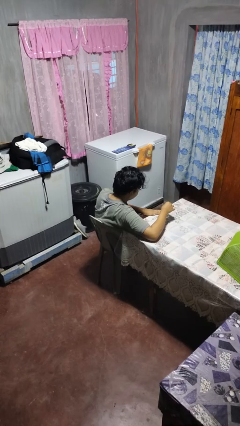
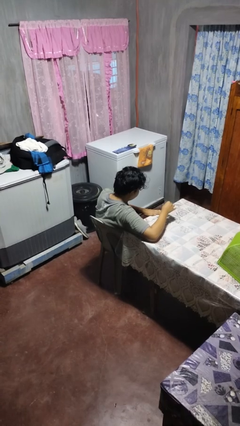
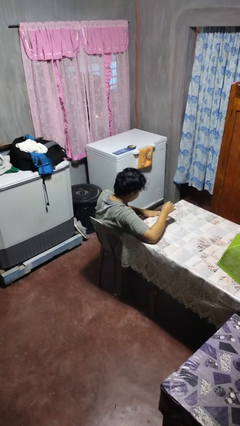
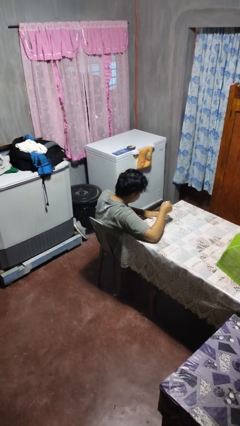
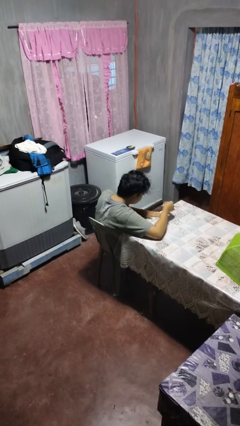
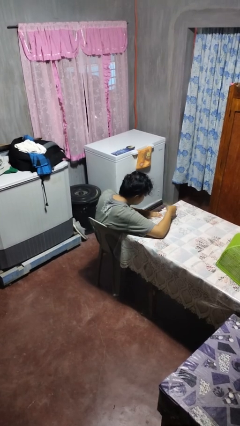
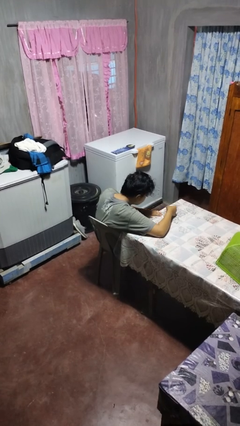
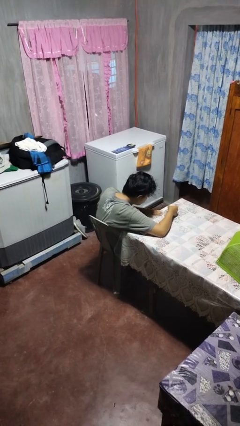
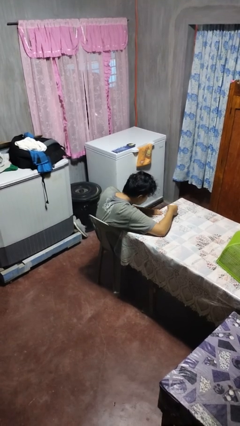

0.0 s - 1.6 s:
person paints fingernails

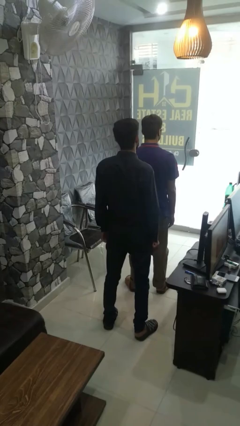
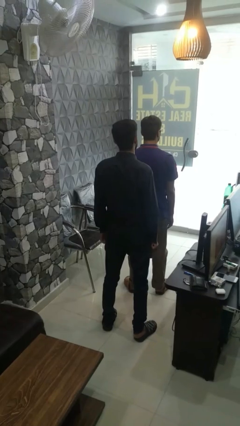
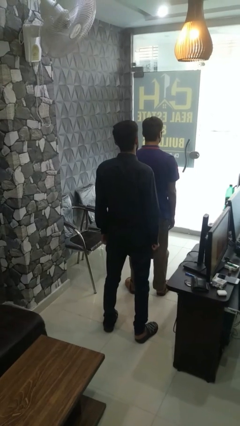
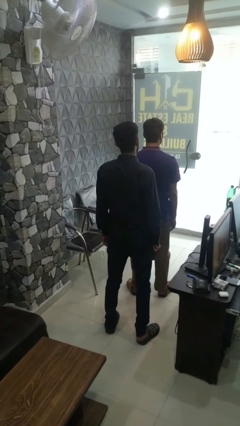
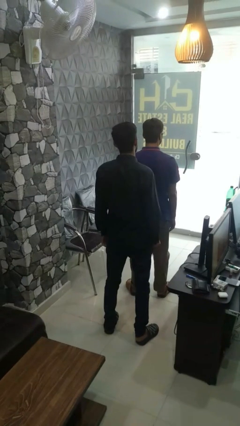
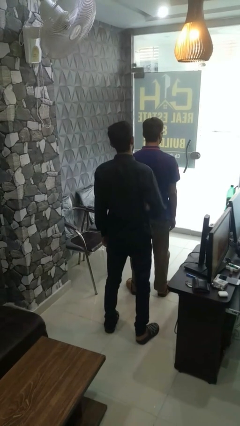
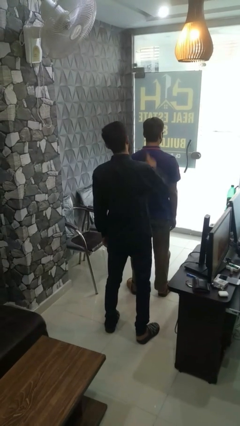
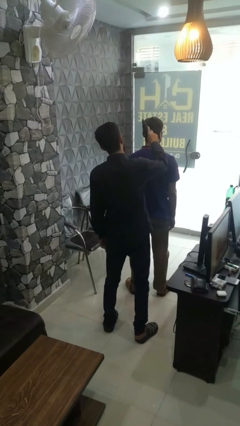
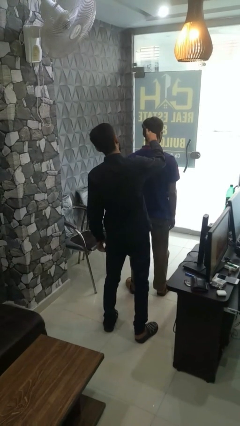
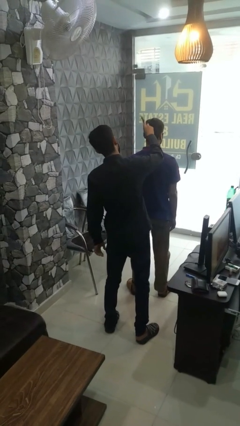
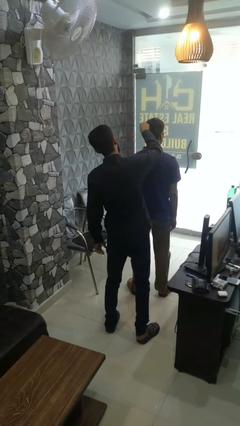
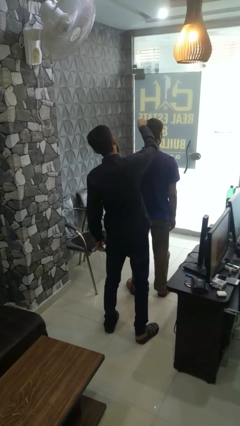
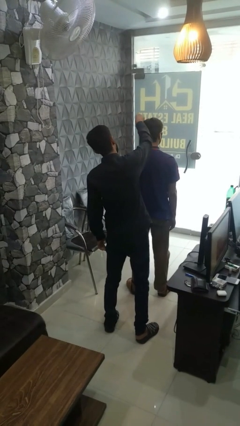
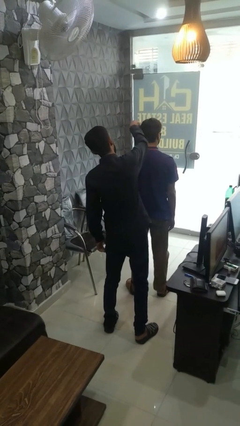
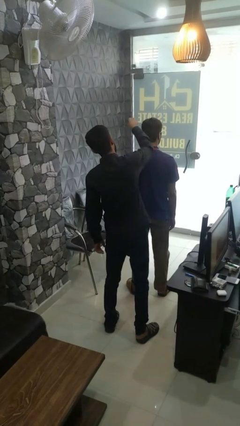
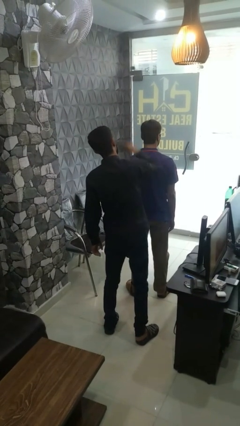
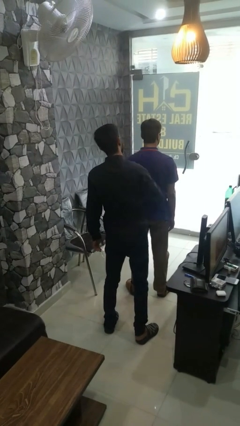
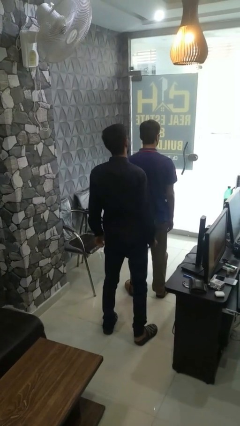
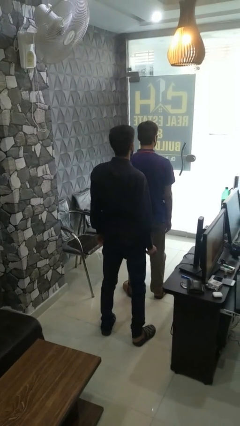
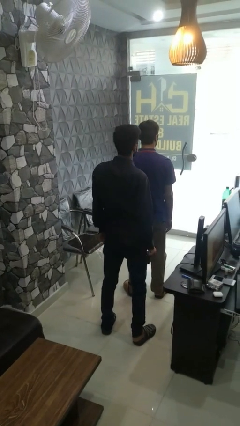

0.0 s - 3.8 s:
person brushes hair of person

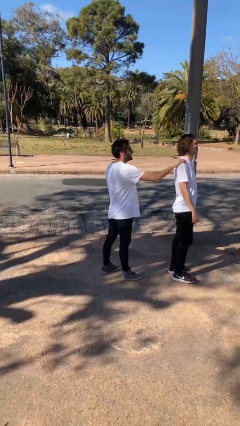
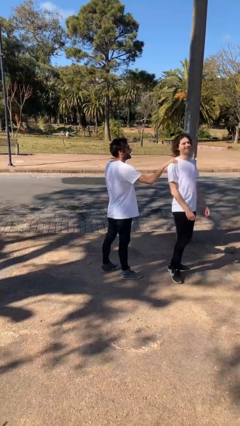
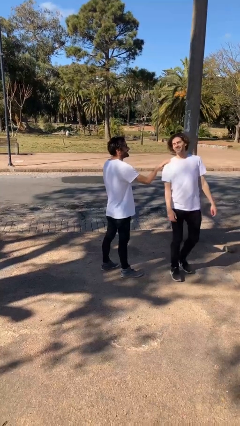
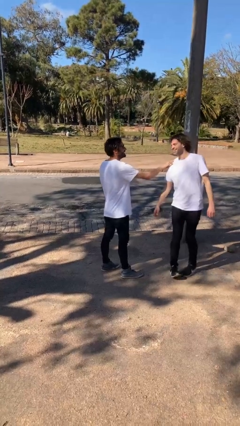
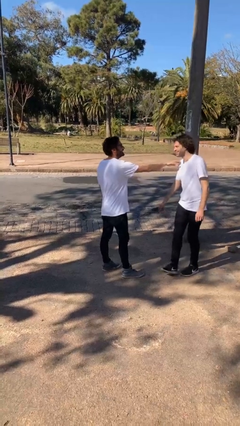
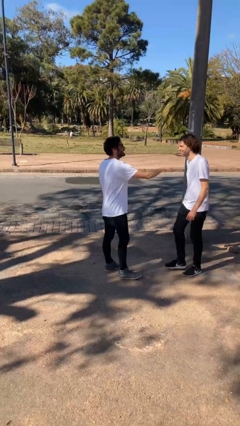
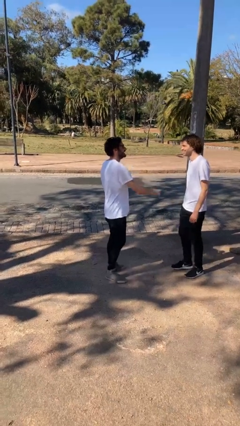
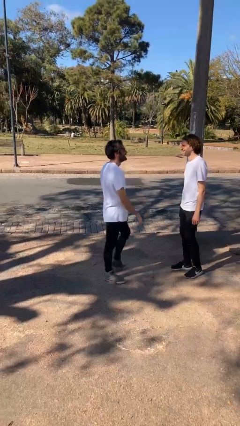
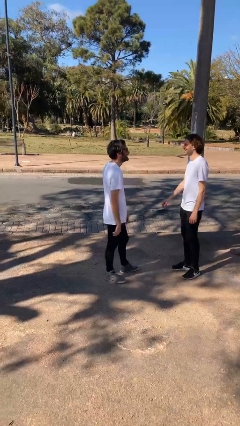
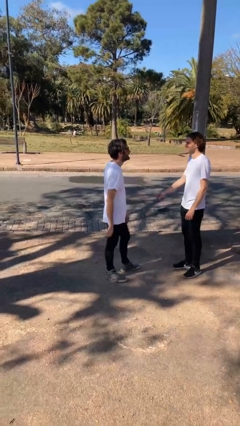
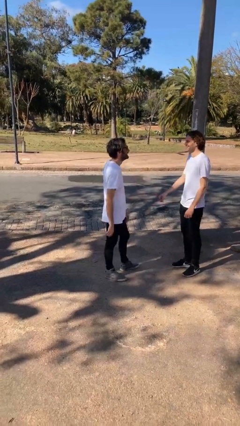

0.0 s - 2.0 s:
person spins person around

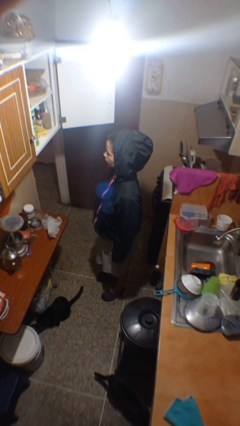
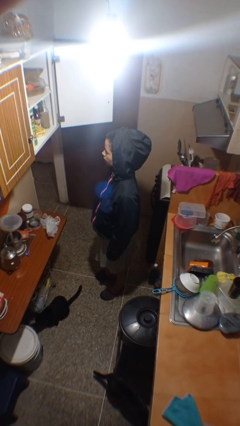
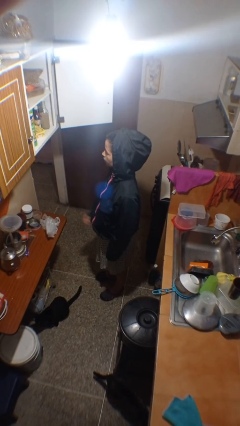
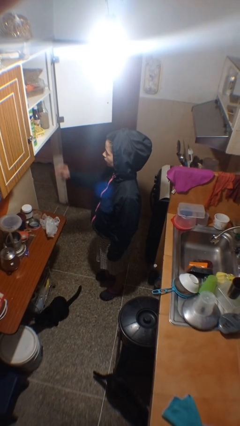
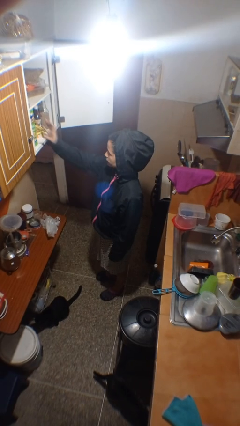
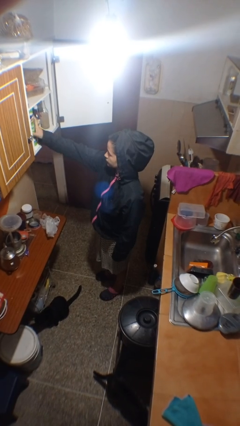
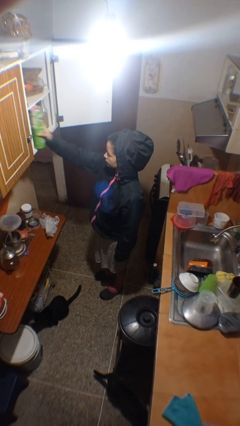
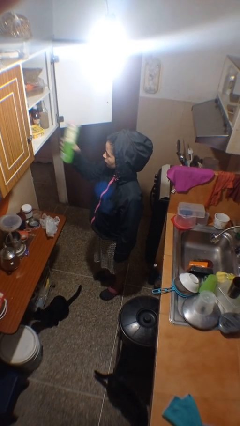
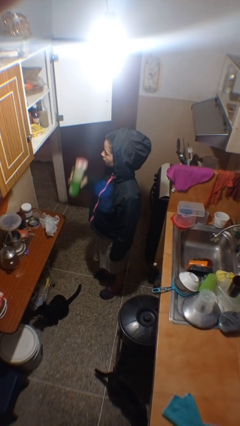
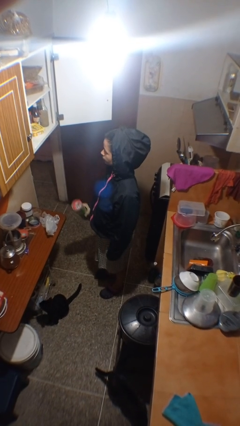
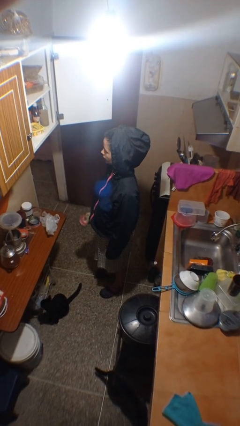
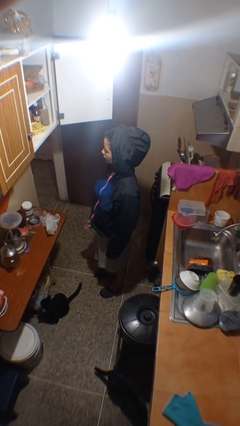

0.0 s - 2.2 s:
person takes object from cabinet

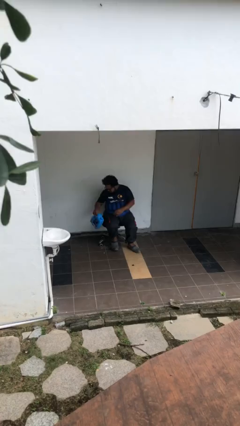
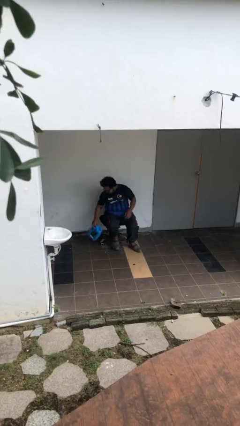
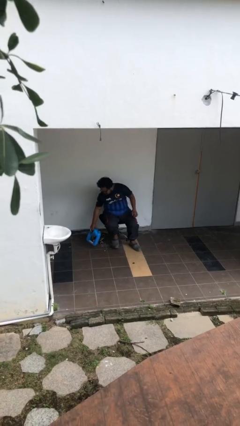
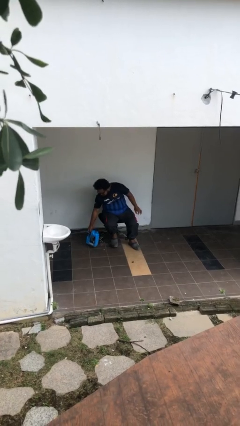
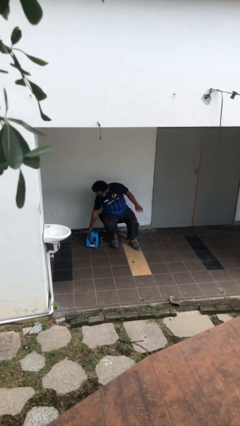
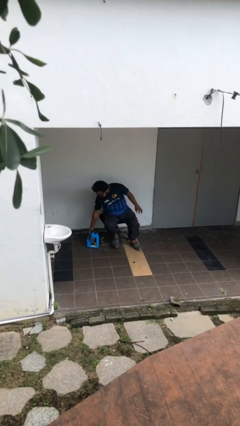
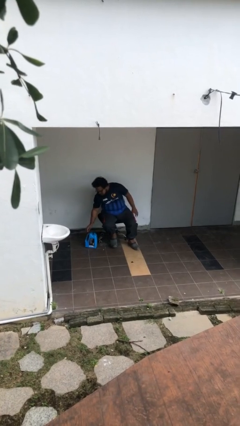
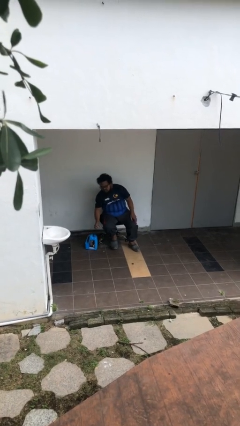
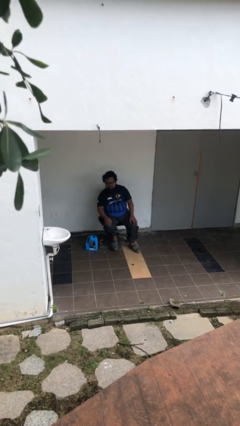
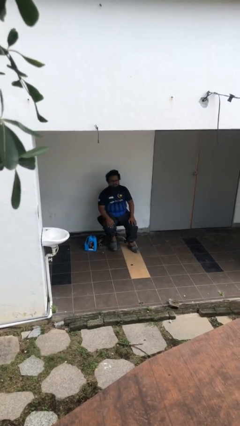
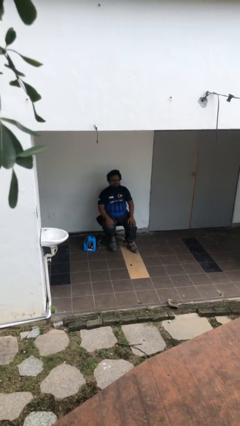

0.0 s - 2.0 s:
person puts down object on floor

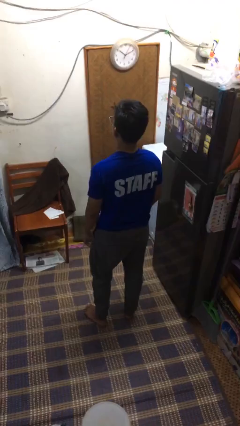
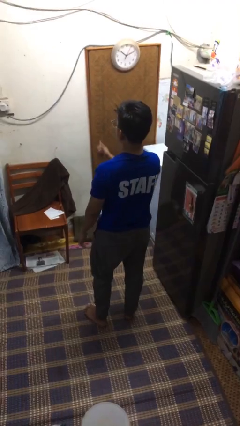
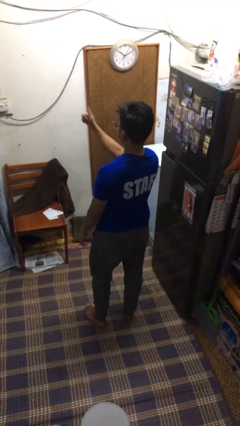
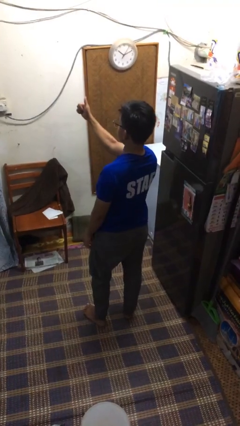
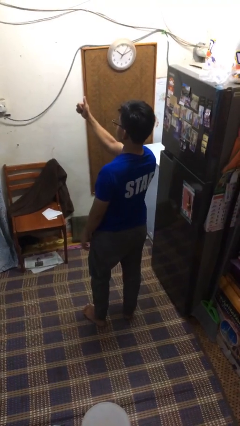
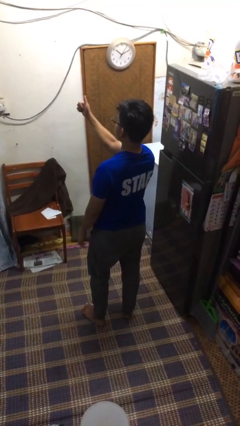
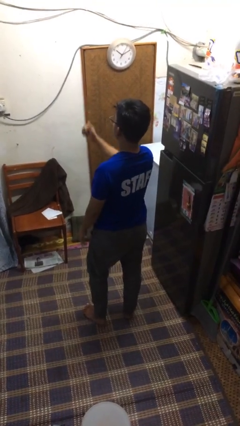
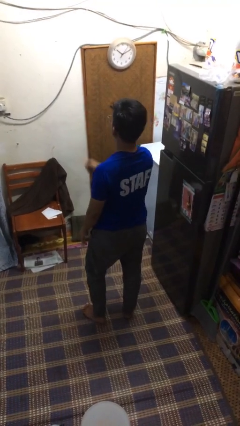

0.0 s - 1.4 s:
person gestures thumbs up

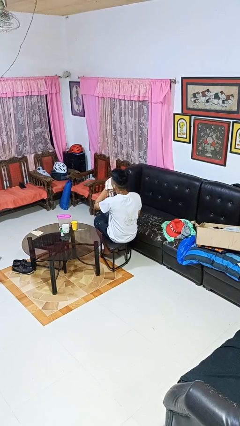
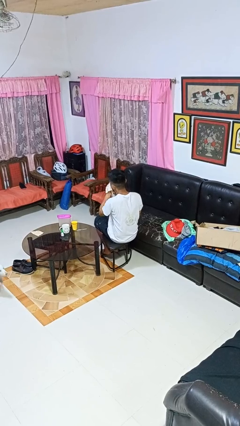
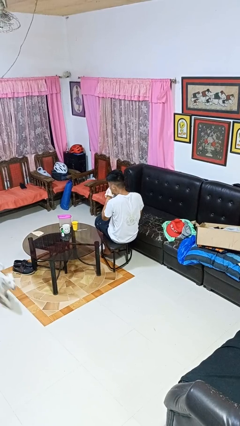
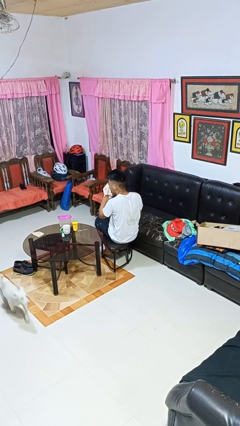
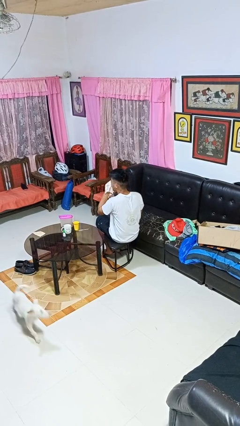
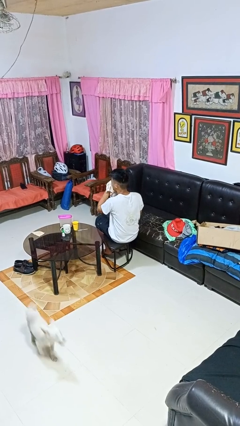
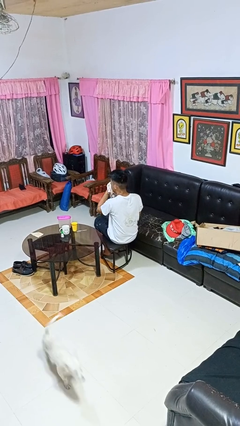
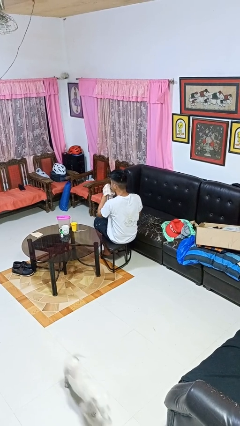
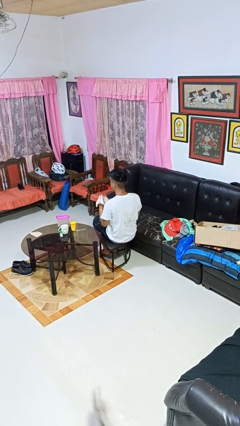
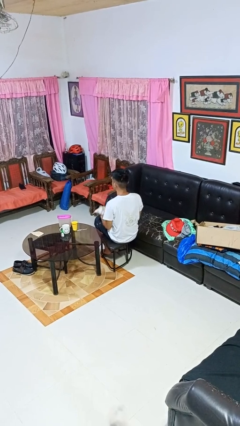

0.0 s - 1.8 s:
person blows nose

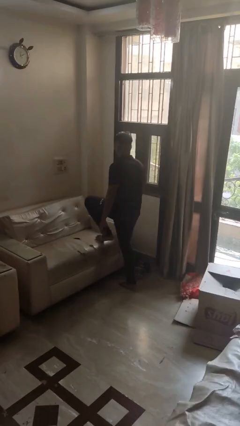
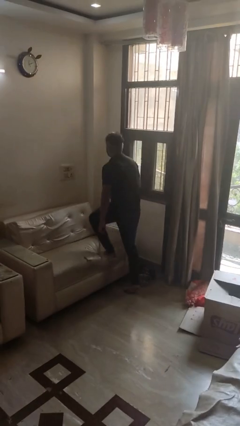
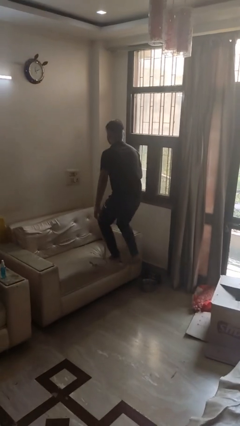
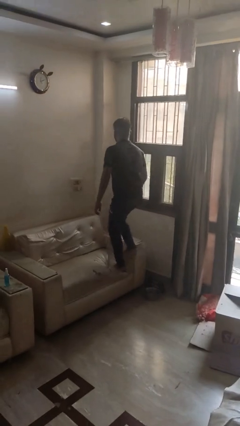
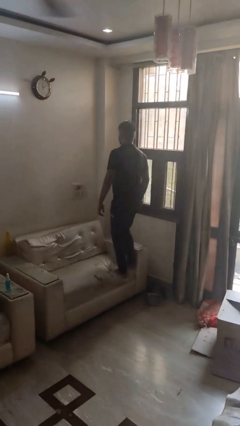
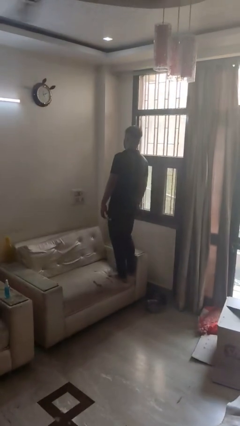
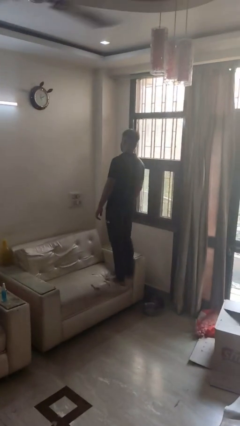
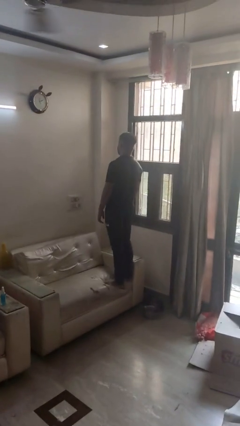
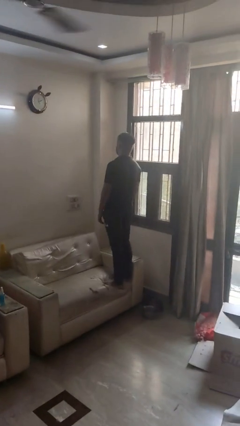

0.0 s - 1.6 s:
person climbs on couch

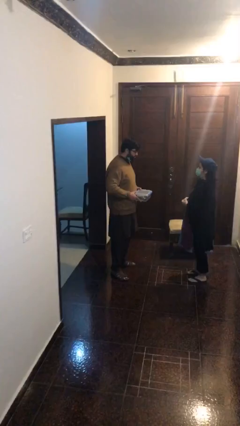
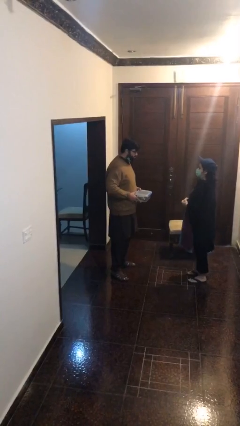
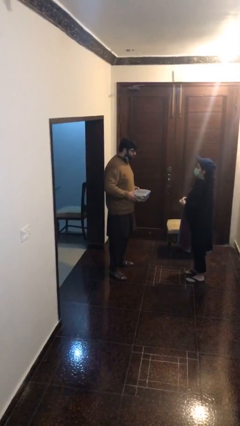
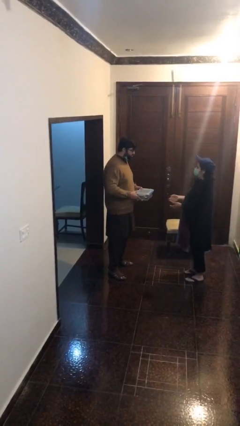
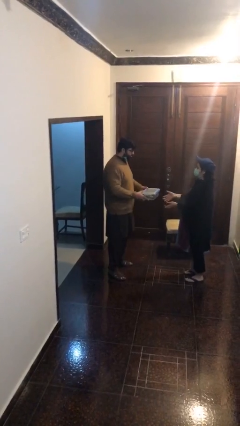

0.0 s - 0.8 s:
person transfers object to person
